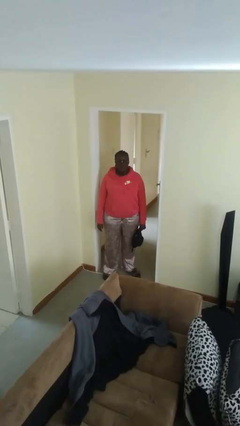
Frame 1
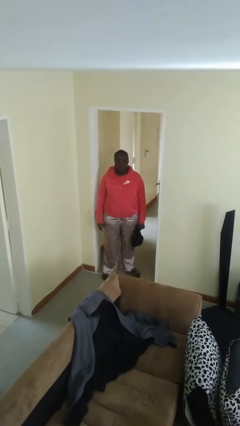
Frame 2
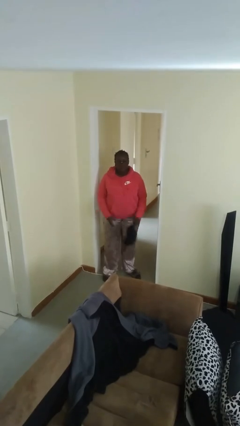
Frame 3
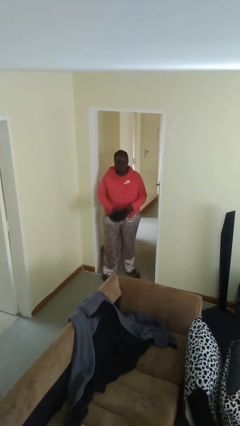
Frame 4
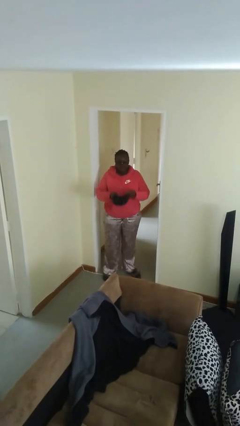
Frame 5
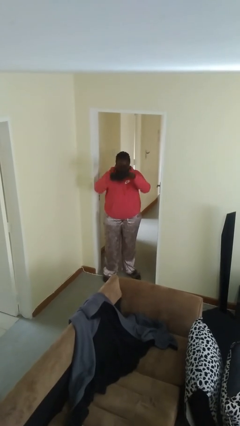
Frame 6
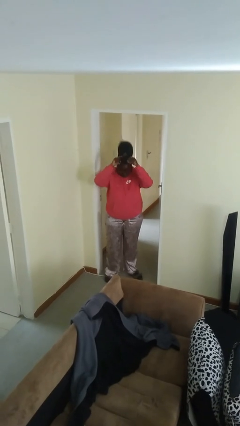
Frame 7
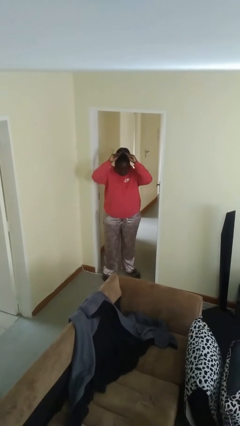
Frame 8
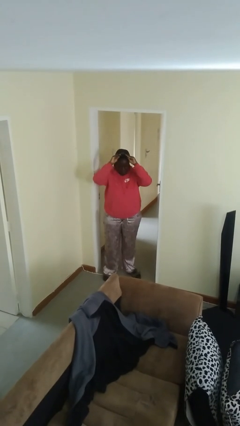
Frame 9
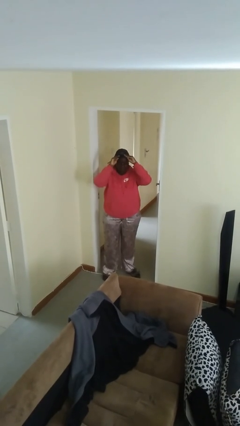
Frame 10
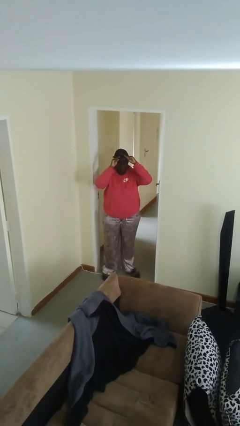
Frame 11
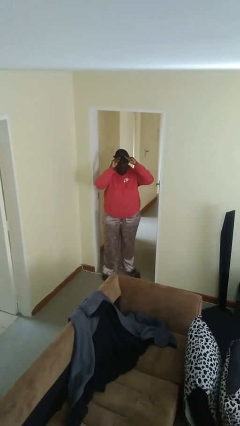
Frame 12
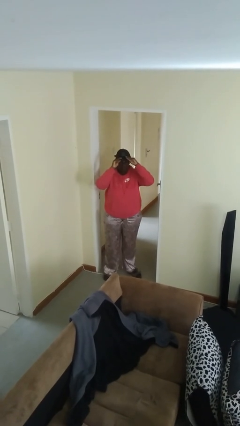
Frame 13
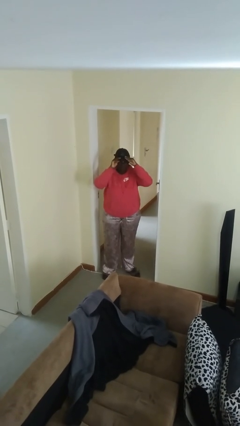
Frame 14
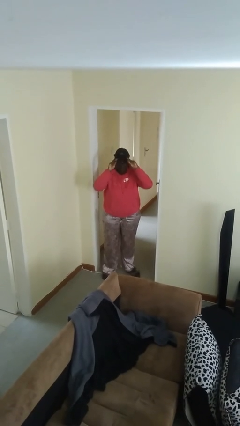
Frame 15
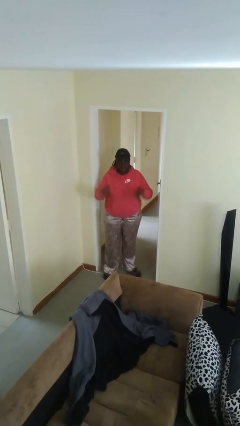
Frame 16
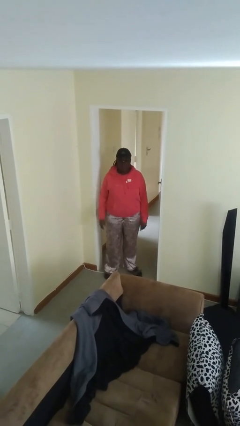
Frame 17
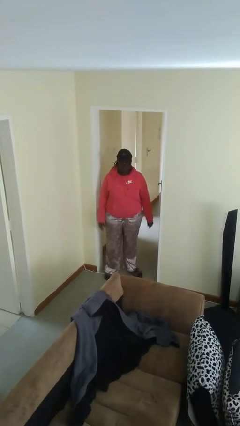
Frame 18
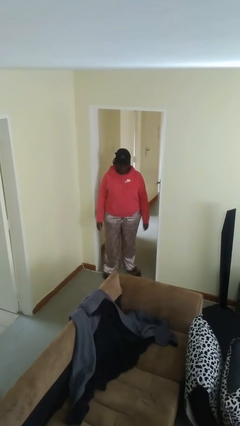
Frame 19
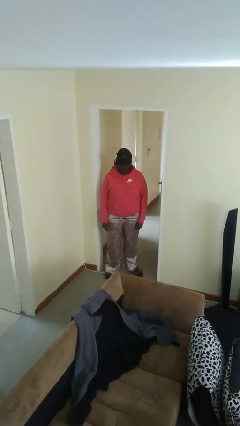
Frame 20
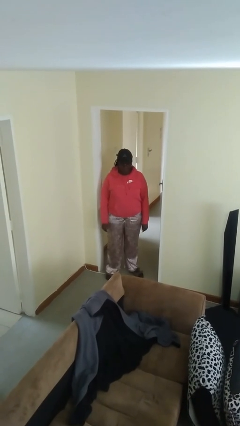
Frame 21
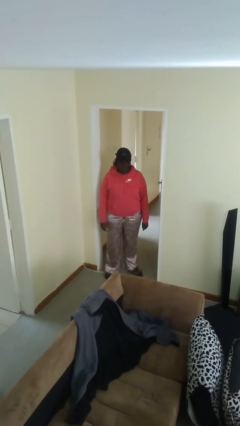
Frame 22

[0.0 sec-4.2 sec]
person puts on hat

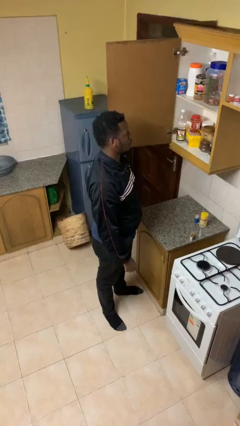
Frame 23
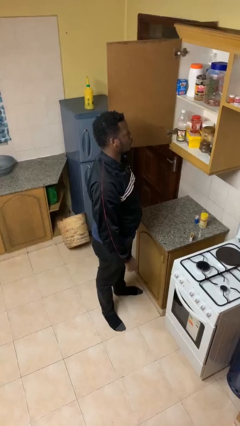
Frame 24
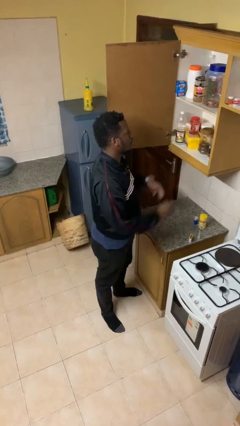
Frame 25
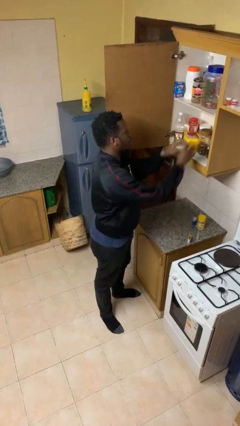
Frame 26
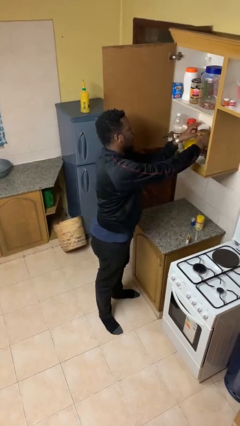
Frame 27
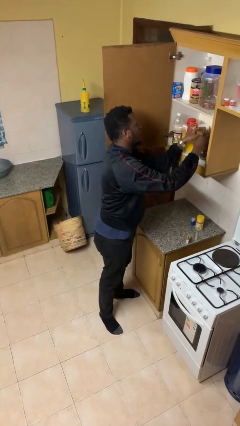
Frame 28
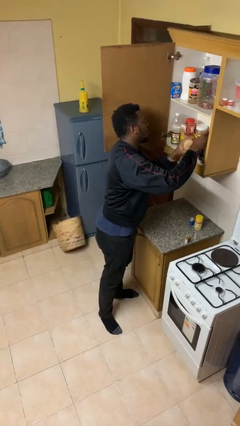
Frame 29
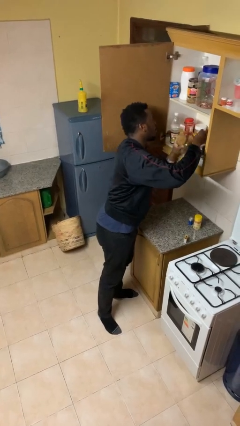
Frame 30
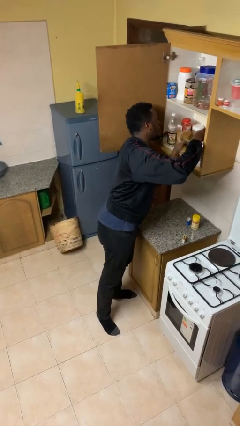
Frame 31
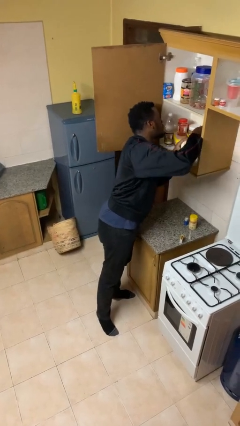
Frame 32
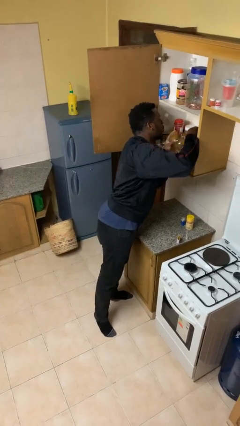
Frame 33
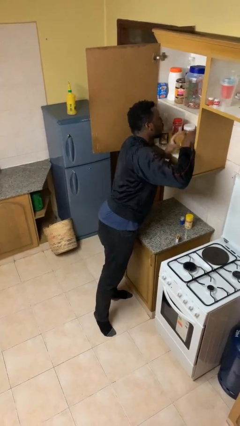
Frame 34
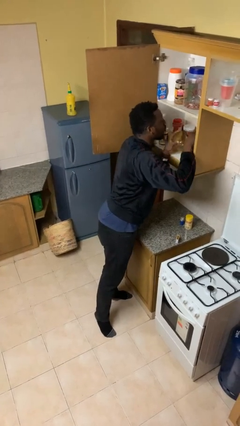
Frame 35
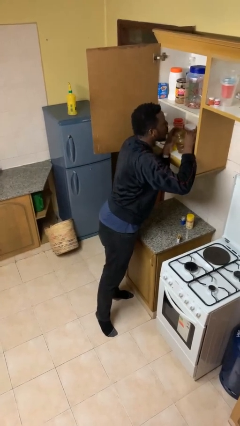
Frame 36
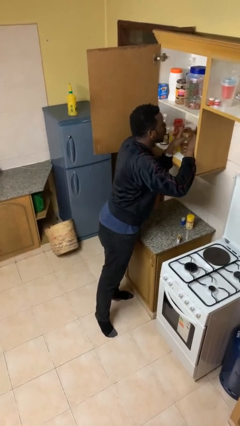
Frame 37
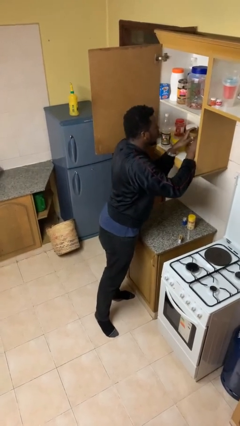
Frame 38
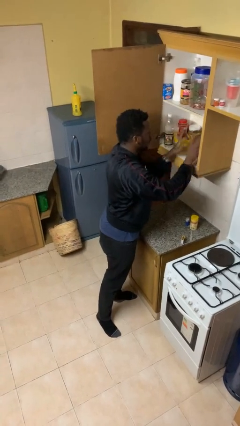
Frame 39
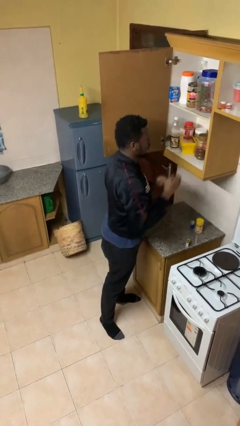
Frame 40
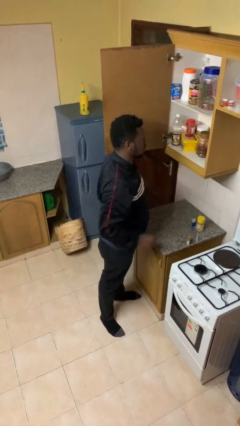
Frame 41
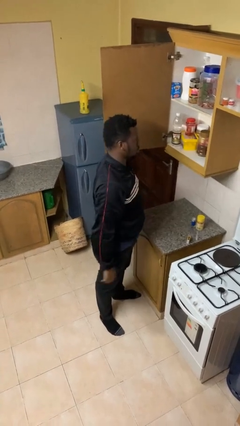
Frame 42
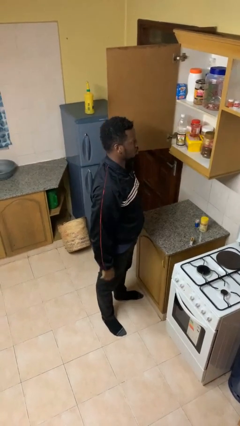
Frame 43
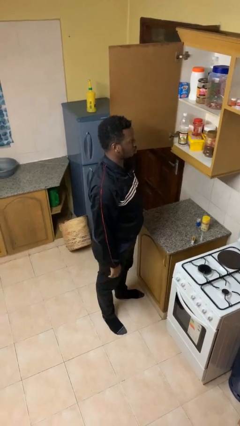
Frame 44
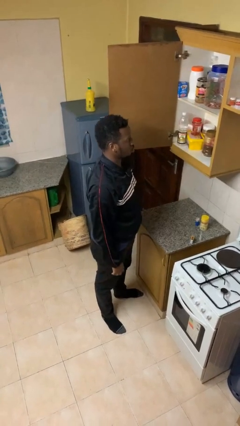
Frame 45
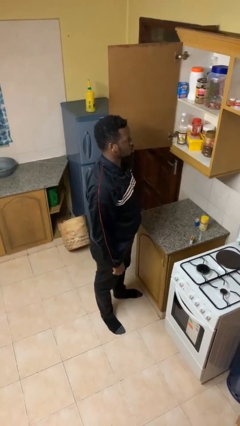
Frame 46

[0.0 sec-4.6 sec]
person searches in cabinet

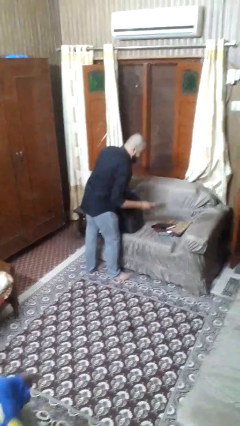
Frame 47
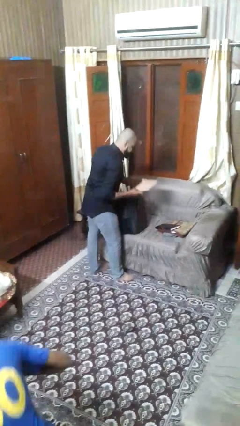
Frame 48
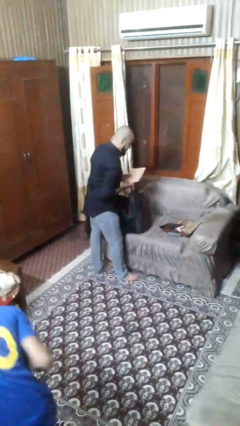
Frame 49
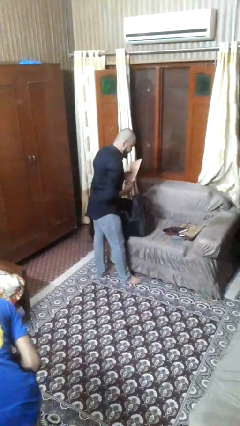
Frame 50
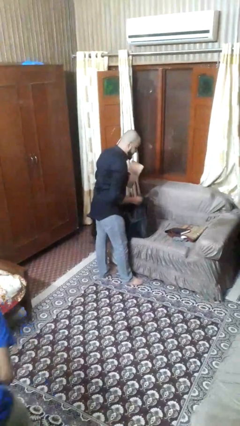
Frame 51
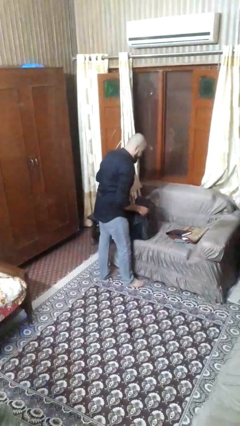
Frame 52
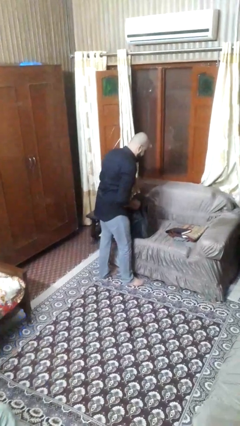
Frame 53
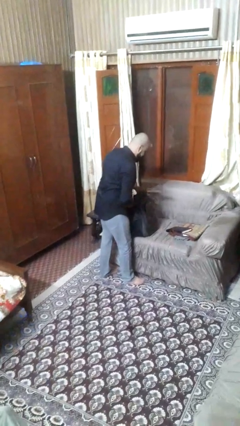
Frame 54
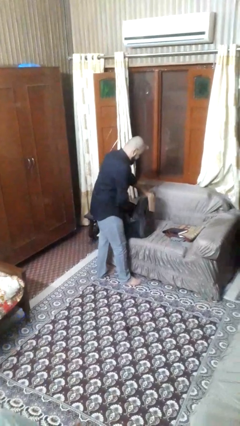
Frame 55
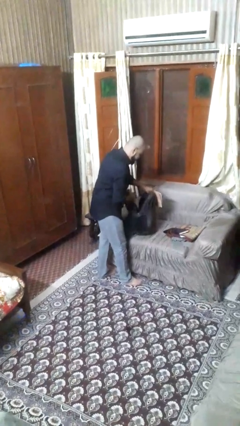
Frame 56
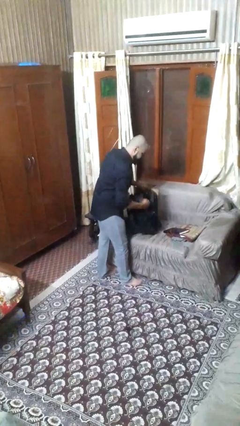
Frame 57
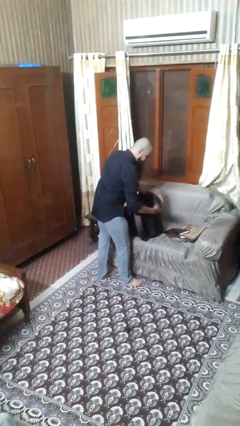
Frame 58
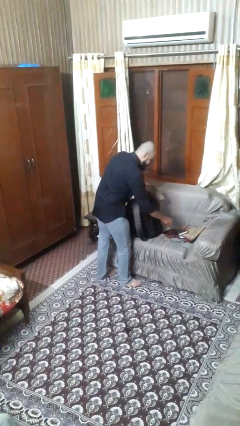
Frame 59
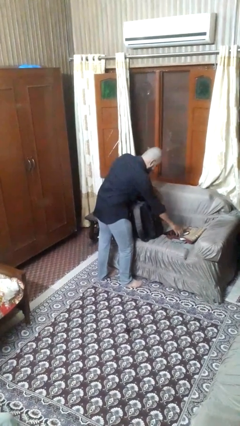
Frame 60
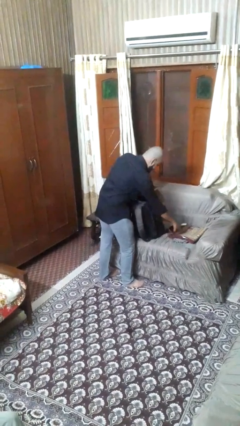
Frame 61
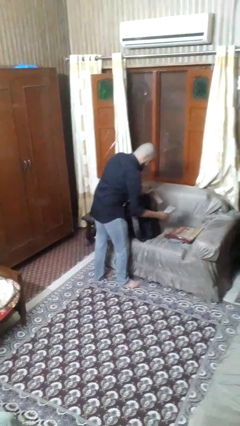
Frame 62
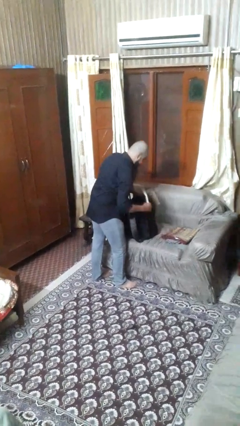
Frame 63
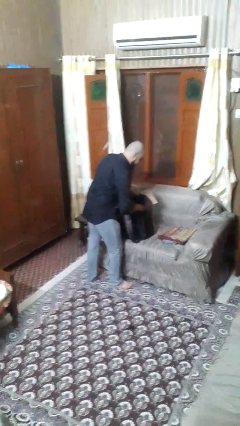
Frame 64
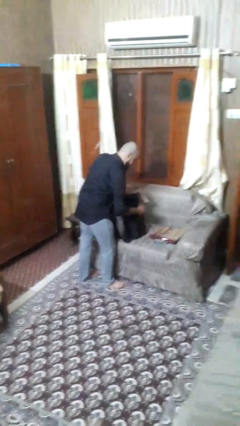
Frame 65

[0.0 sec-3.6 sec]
person takes object from backpack

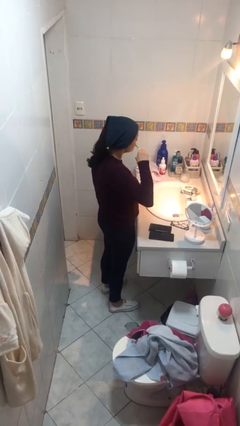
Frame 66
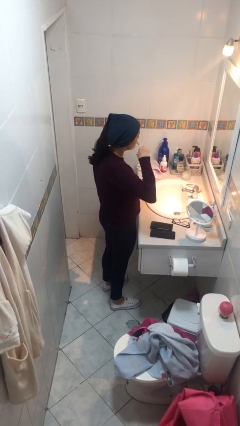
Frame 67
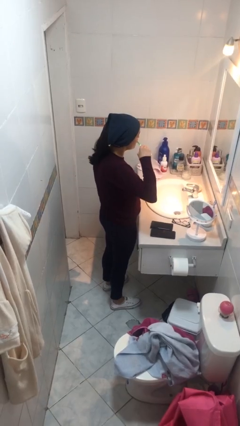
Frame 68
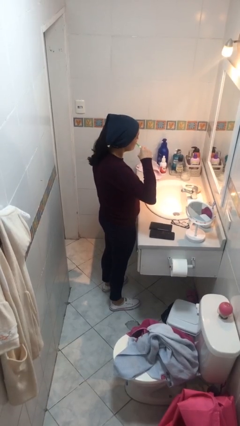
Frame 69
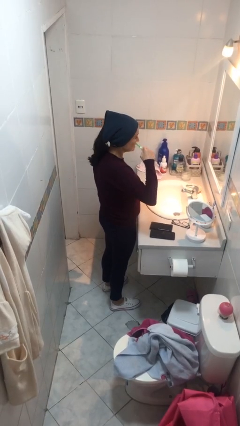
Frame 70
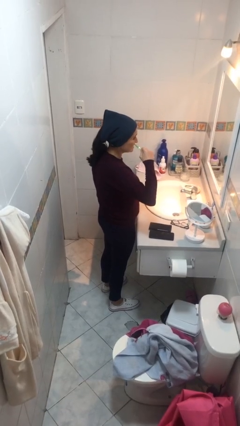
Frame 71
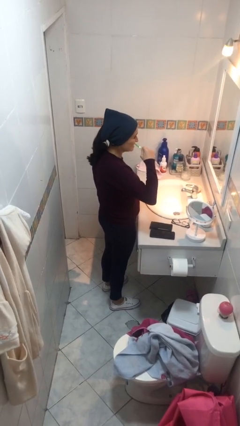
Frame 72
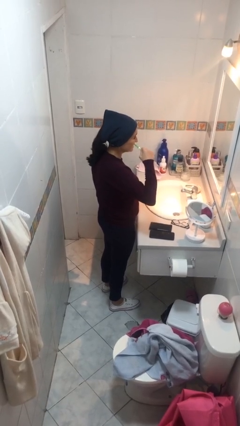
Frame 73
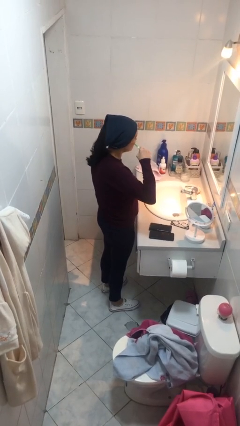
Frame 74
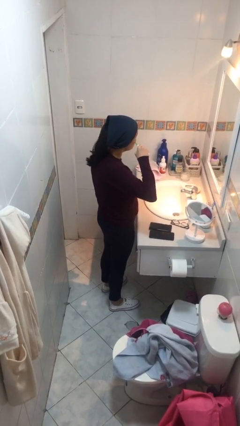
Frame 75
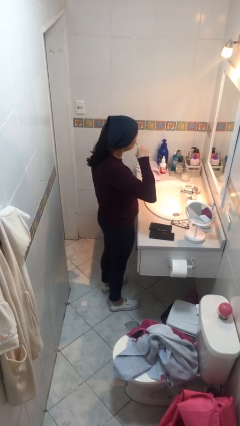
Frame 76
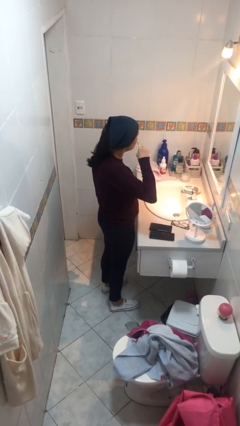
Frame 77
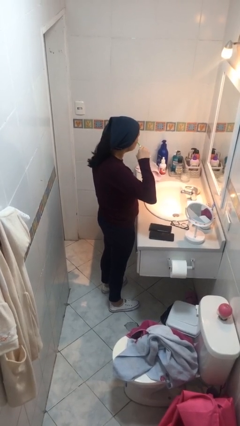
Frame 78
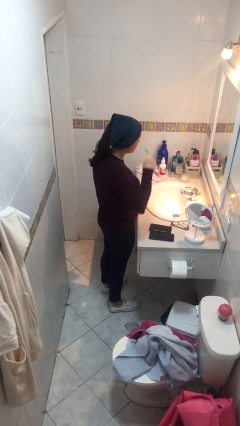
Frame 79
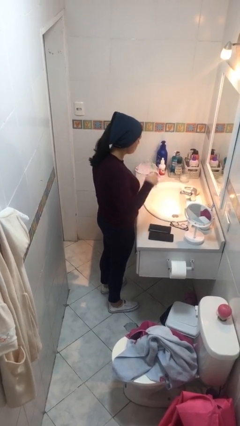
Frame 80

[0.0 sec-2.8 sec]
person brushes teeth

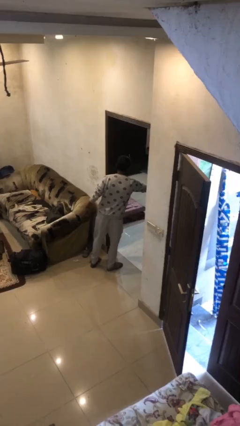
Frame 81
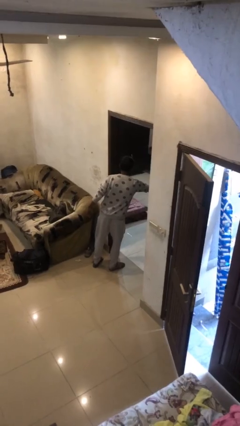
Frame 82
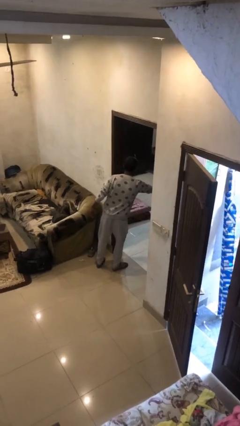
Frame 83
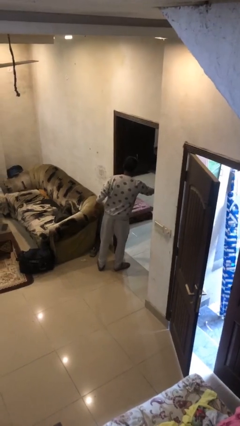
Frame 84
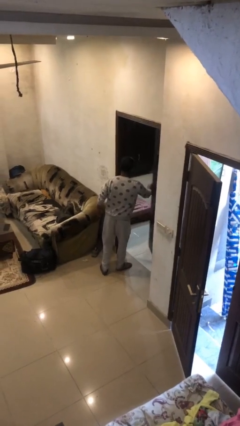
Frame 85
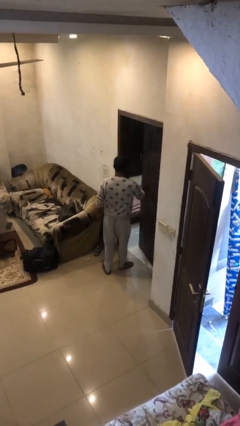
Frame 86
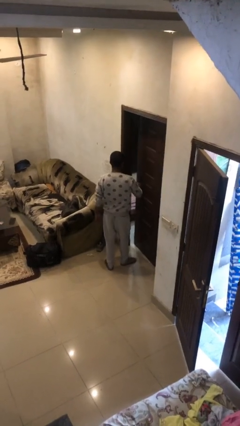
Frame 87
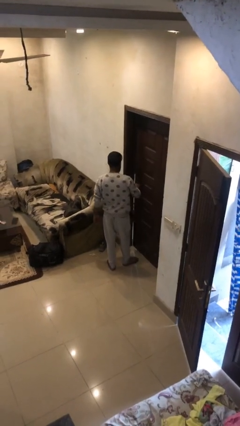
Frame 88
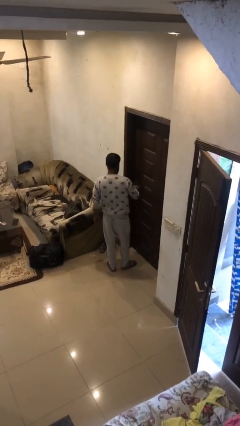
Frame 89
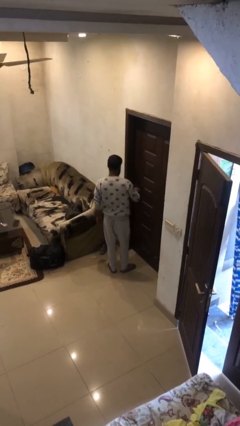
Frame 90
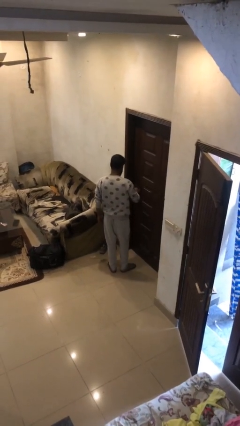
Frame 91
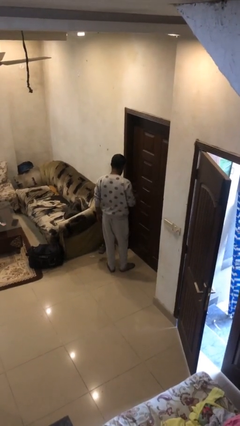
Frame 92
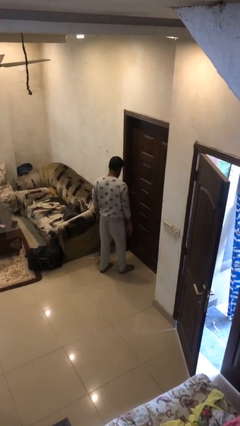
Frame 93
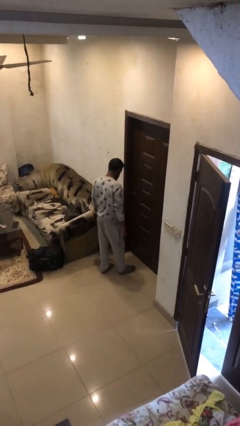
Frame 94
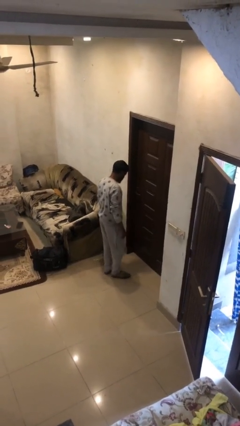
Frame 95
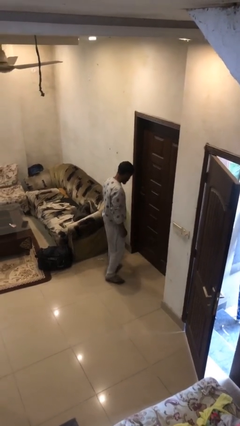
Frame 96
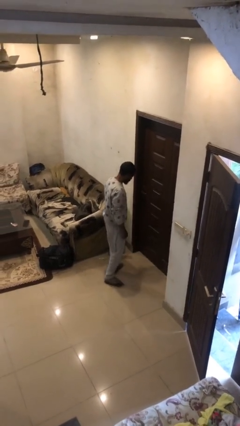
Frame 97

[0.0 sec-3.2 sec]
person closes facility door
